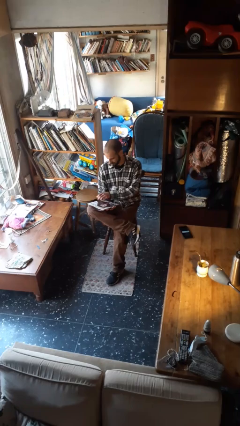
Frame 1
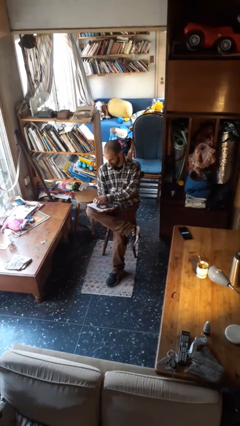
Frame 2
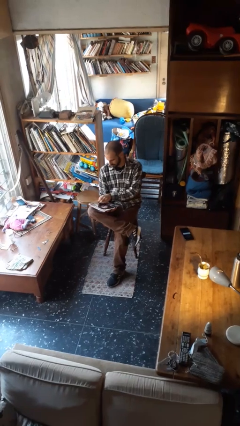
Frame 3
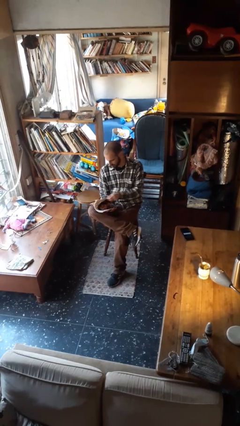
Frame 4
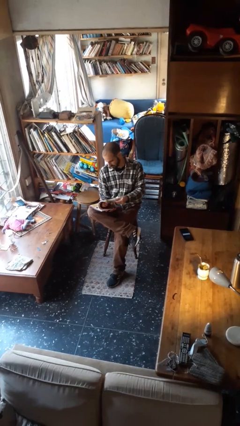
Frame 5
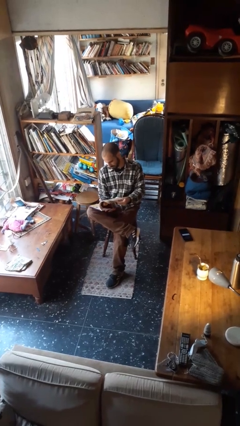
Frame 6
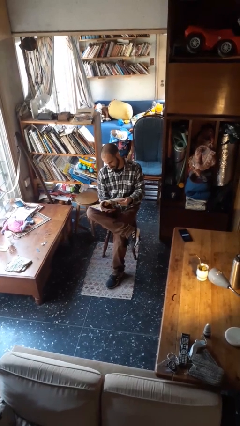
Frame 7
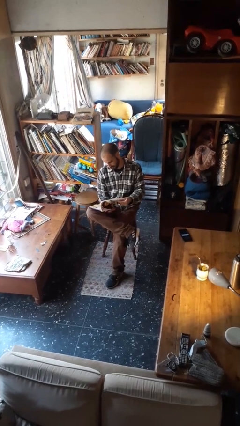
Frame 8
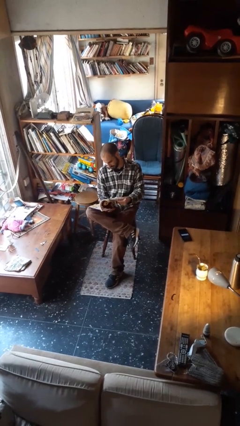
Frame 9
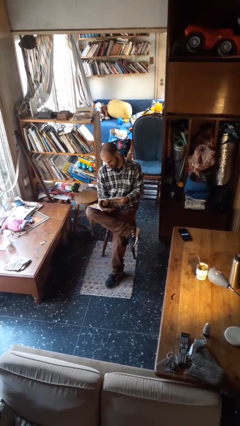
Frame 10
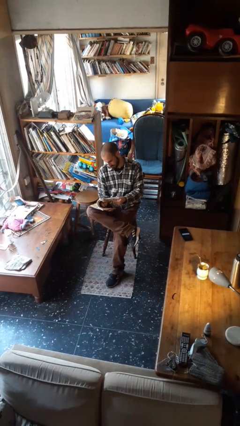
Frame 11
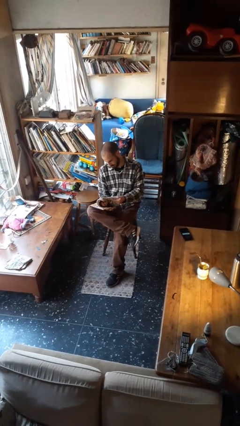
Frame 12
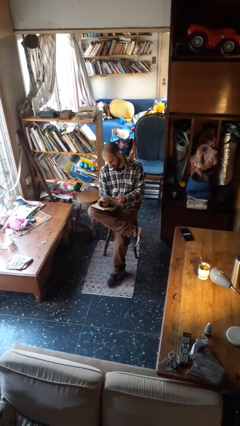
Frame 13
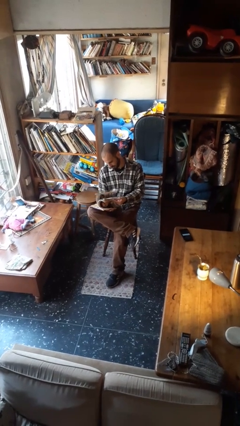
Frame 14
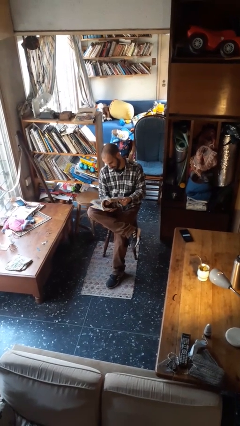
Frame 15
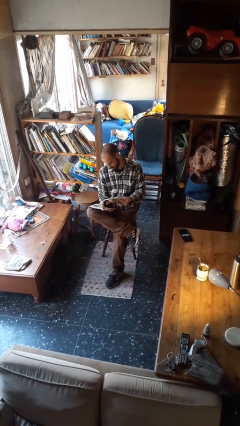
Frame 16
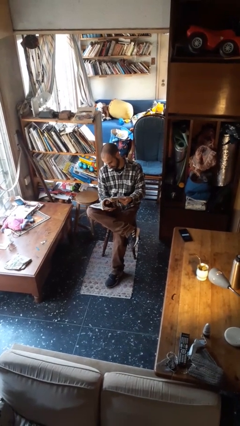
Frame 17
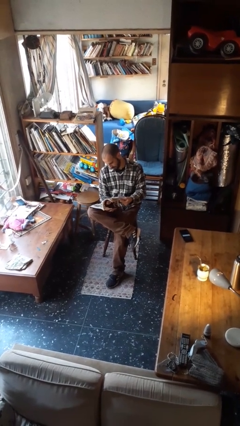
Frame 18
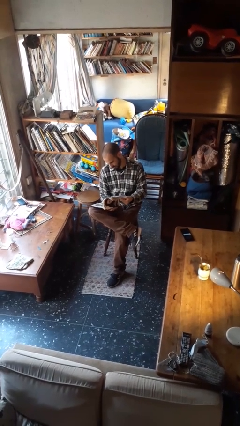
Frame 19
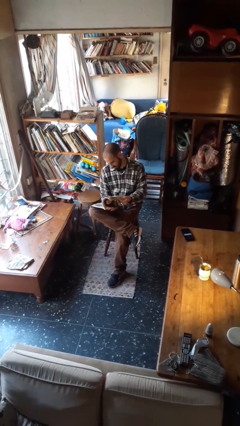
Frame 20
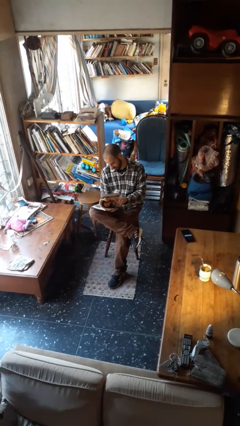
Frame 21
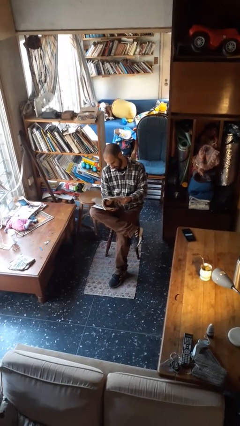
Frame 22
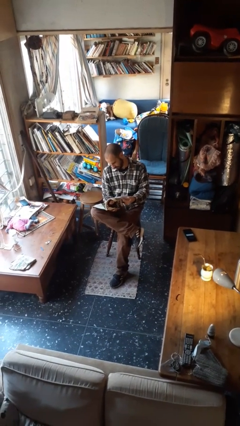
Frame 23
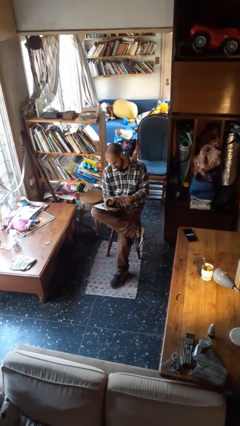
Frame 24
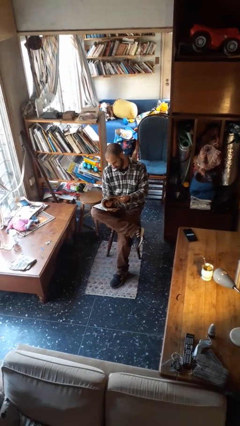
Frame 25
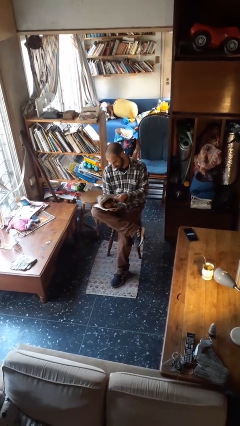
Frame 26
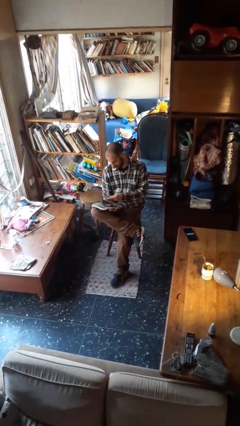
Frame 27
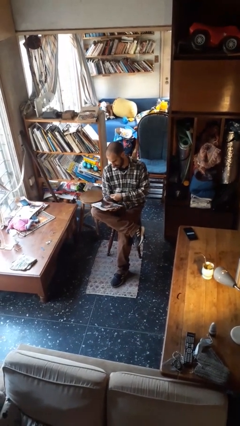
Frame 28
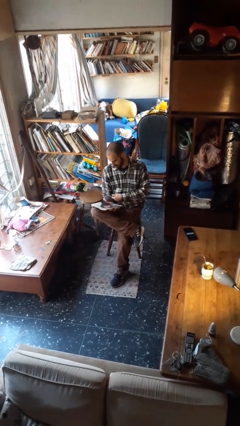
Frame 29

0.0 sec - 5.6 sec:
person reads magazine

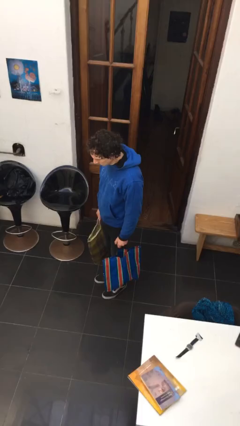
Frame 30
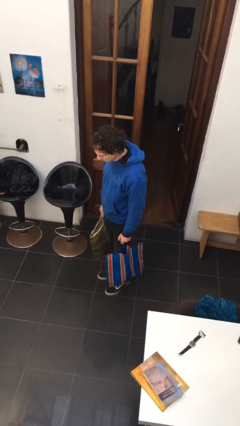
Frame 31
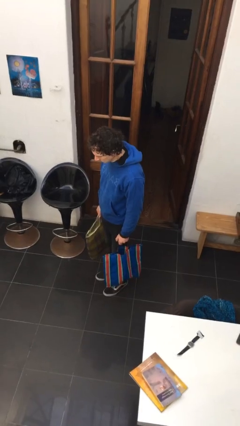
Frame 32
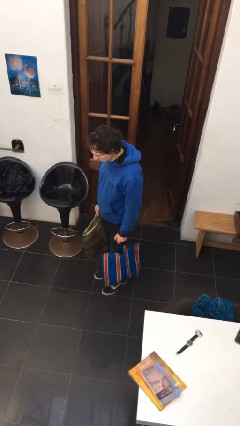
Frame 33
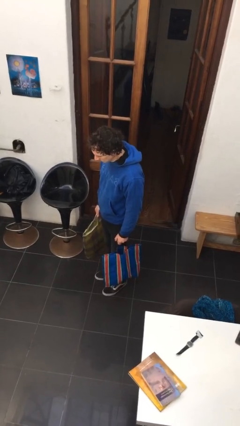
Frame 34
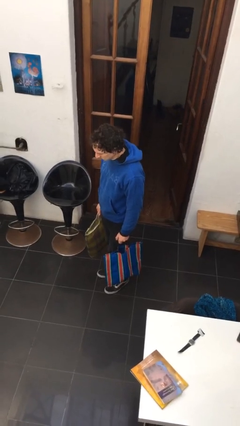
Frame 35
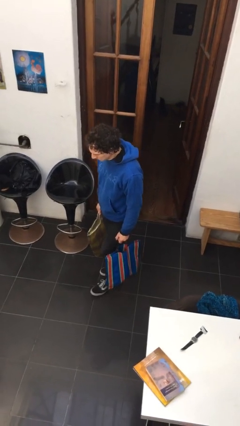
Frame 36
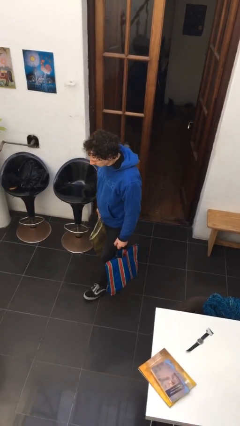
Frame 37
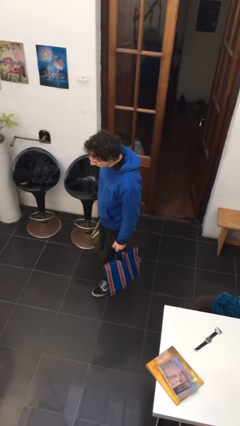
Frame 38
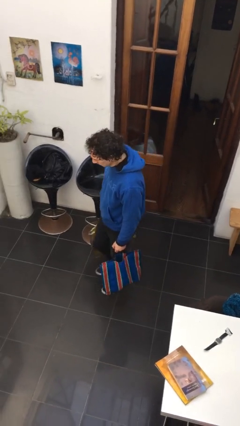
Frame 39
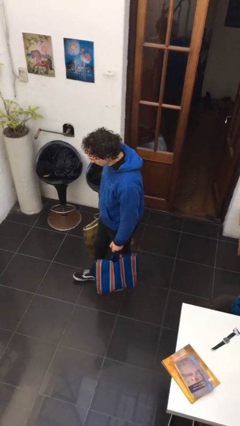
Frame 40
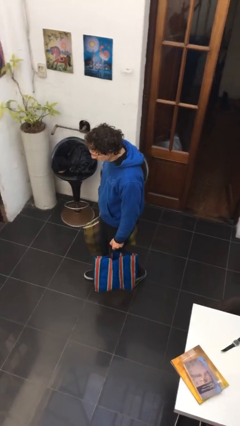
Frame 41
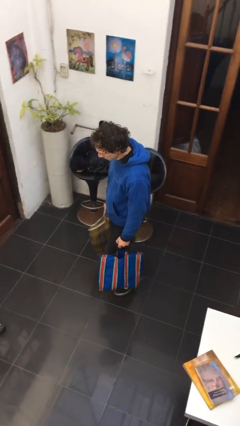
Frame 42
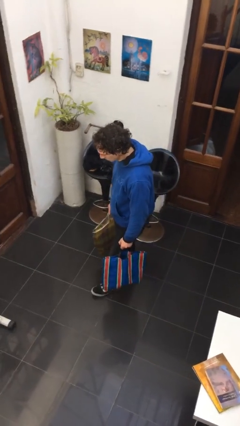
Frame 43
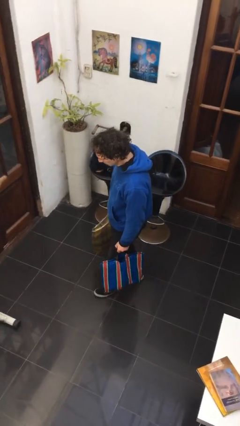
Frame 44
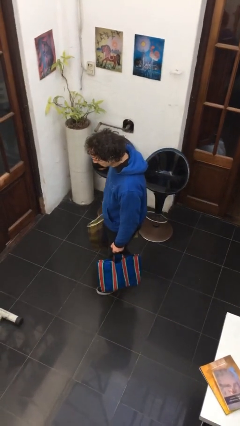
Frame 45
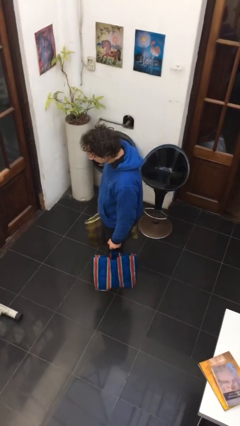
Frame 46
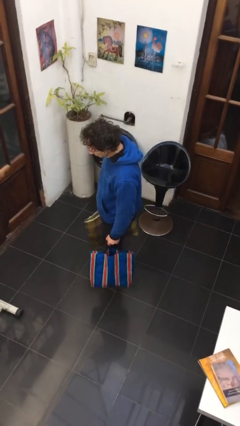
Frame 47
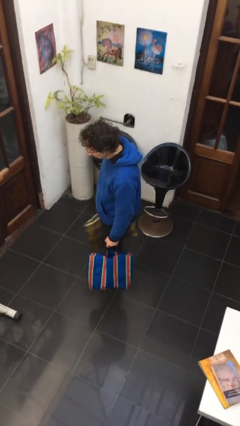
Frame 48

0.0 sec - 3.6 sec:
person carries groceries

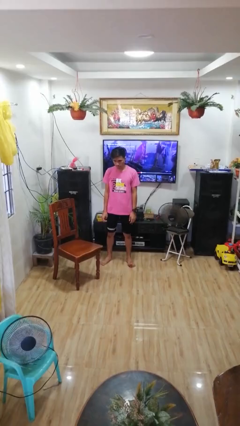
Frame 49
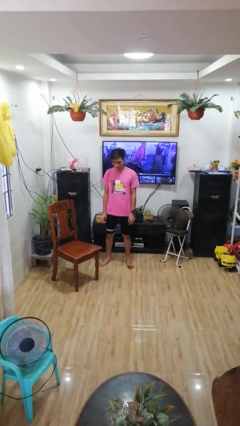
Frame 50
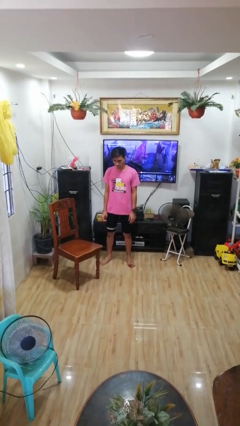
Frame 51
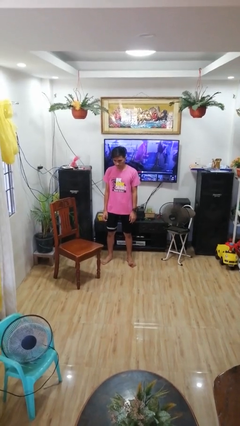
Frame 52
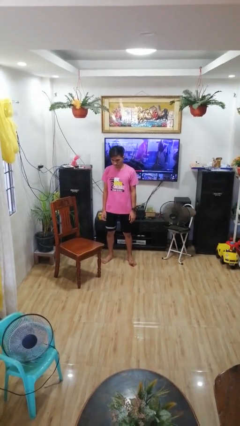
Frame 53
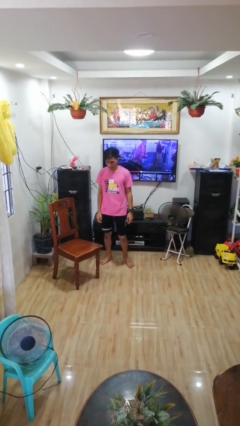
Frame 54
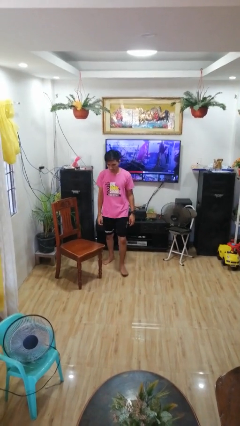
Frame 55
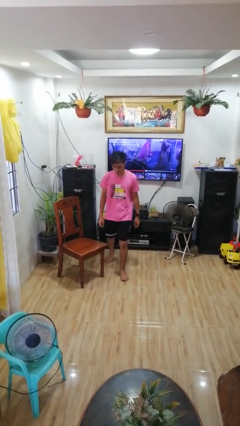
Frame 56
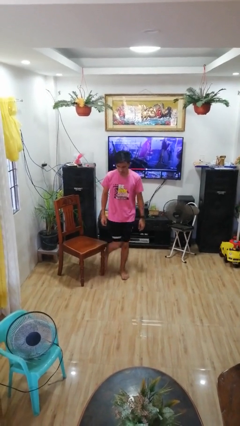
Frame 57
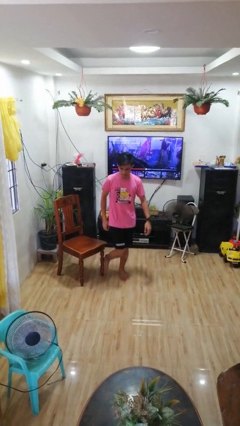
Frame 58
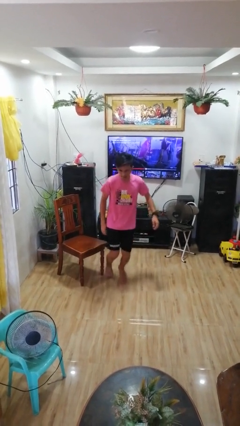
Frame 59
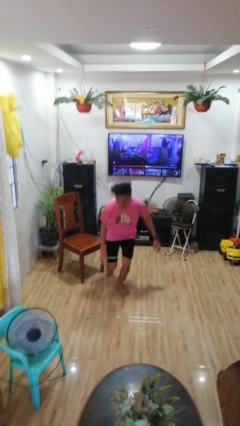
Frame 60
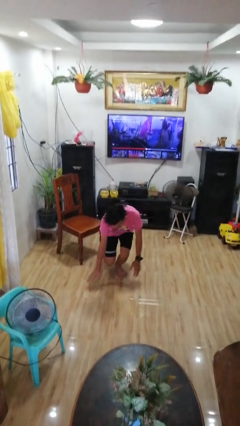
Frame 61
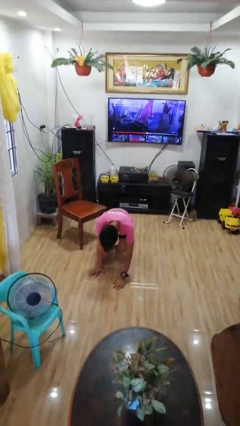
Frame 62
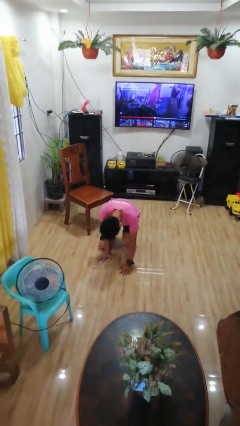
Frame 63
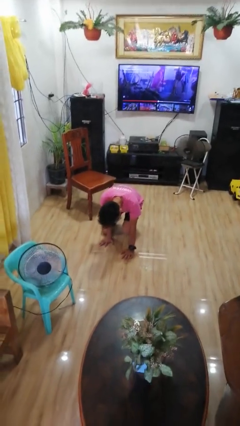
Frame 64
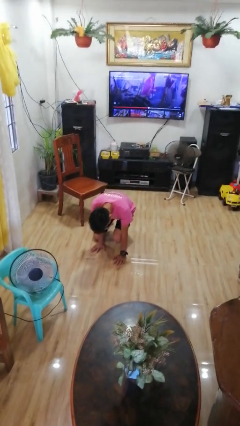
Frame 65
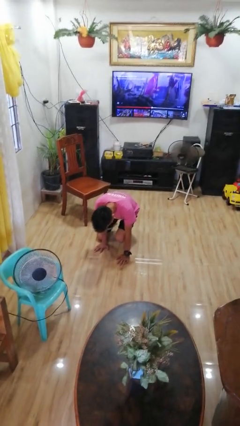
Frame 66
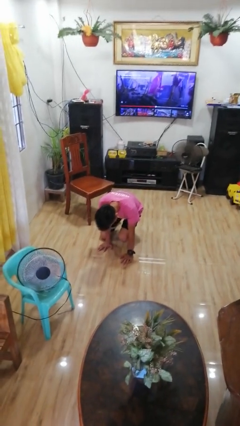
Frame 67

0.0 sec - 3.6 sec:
person trips on object on floor

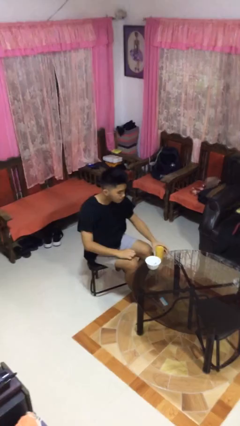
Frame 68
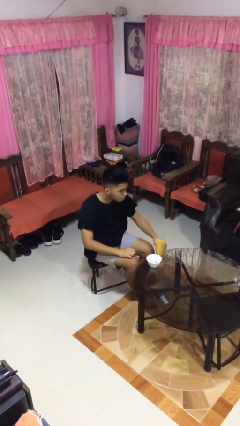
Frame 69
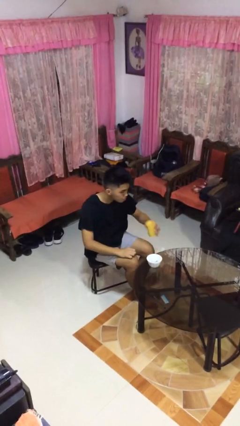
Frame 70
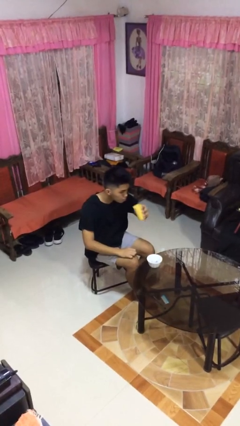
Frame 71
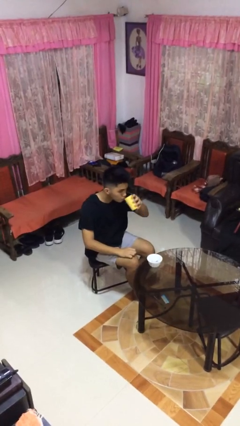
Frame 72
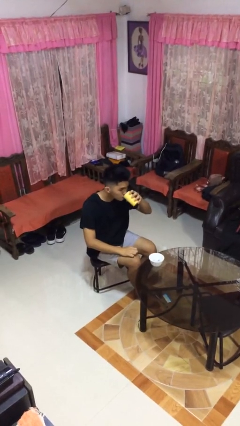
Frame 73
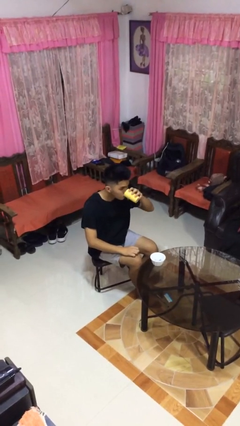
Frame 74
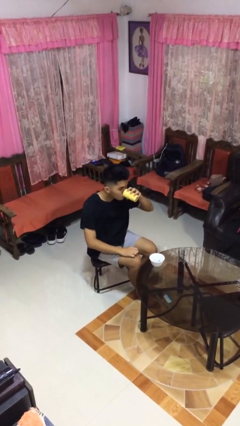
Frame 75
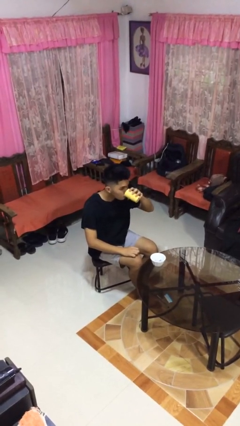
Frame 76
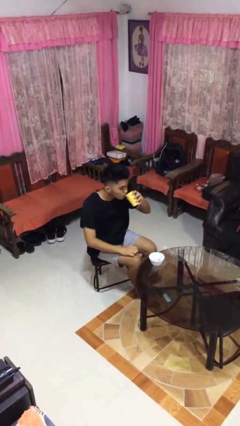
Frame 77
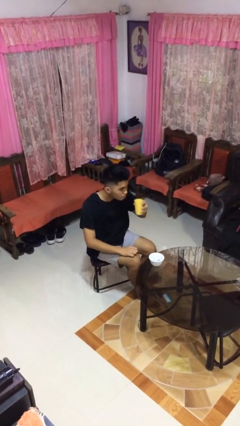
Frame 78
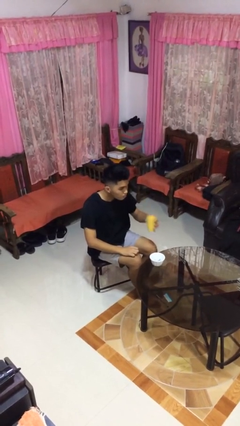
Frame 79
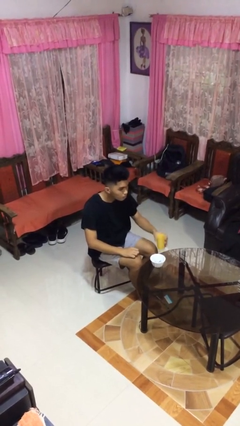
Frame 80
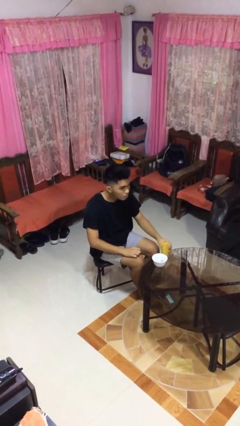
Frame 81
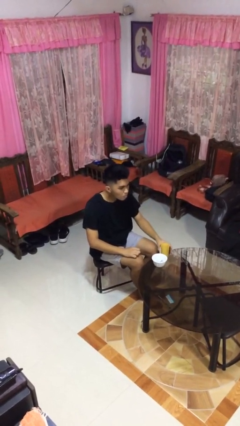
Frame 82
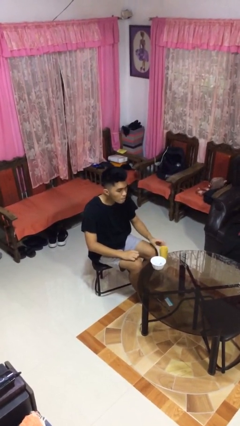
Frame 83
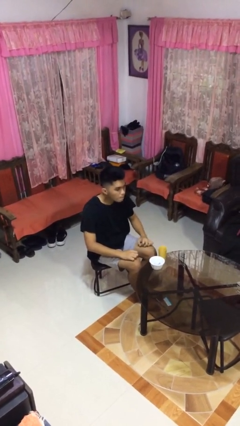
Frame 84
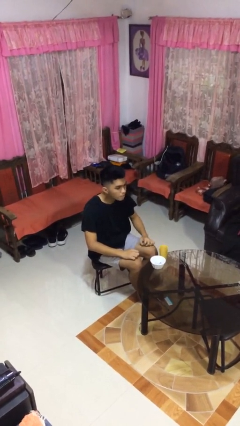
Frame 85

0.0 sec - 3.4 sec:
person drinks from cup

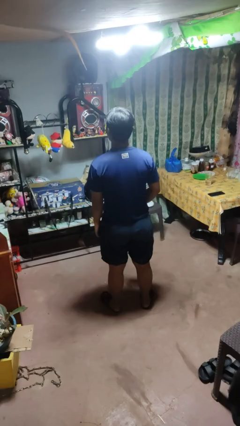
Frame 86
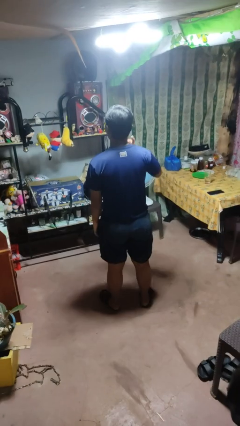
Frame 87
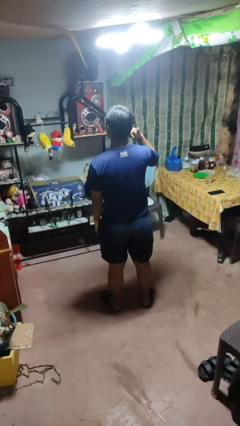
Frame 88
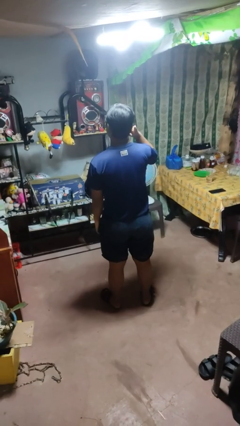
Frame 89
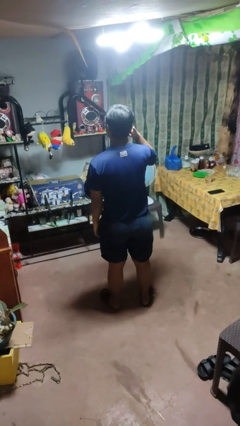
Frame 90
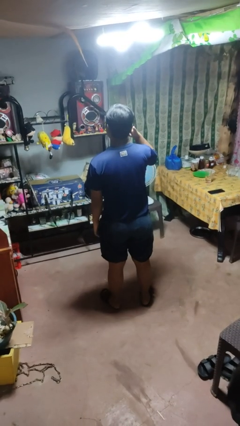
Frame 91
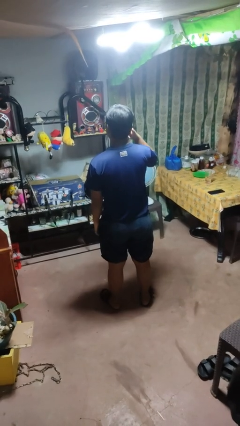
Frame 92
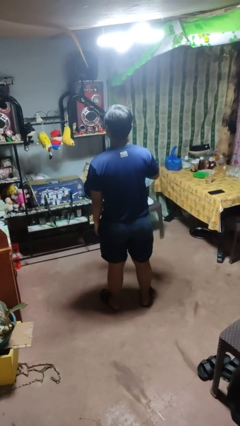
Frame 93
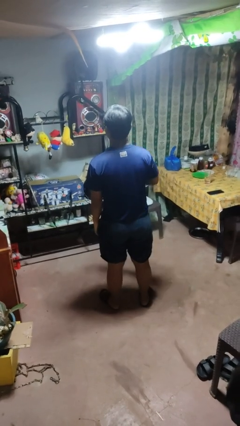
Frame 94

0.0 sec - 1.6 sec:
person gestures call me
